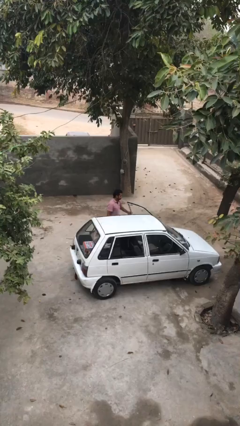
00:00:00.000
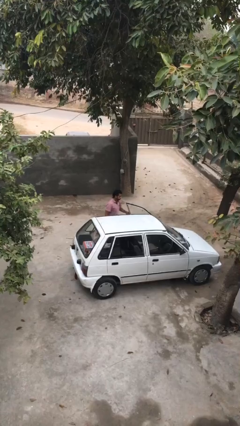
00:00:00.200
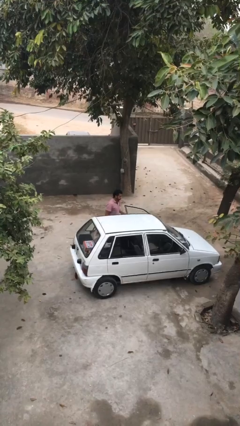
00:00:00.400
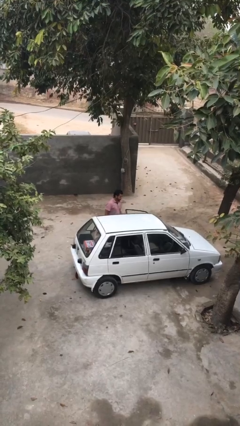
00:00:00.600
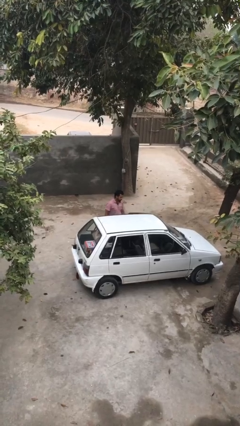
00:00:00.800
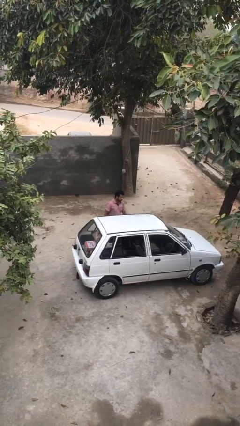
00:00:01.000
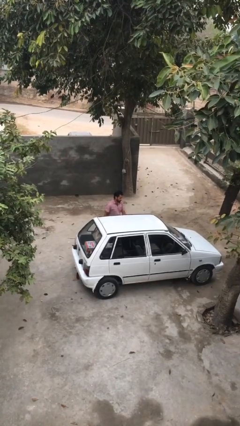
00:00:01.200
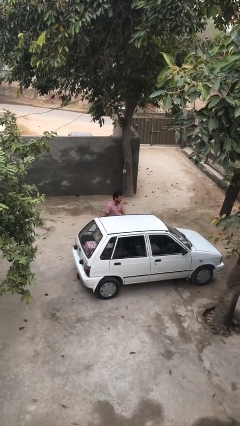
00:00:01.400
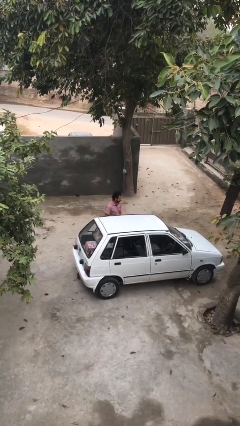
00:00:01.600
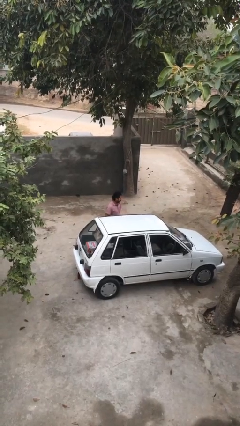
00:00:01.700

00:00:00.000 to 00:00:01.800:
person closes car door

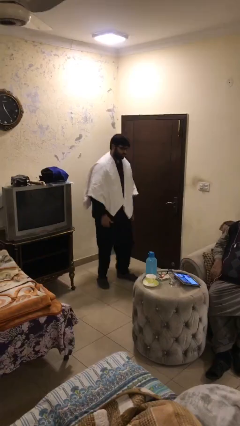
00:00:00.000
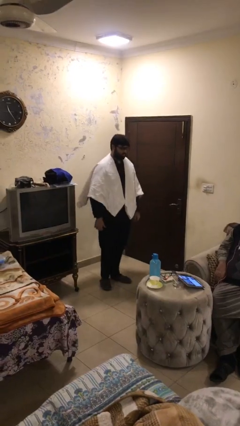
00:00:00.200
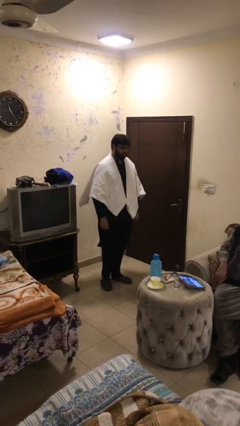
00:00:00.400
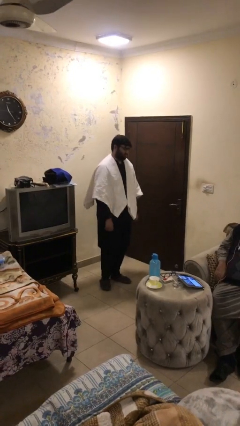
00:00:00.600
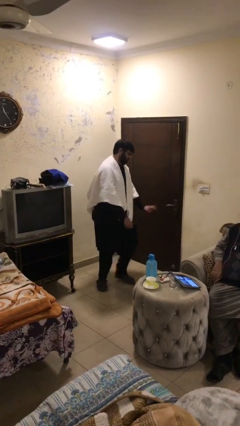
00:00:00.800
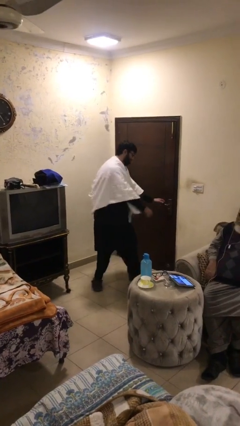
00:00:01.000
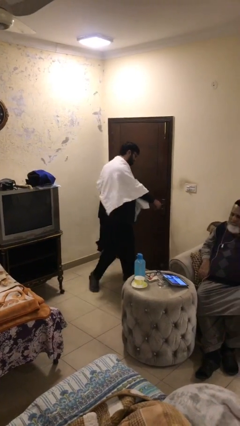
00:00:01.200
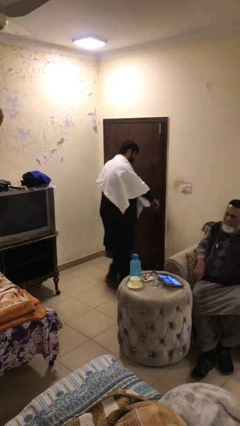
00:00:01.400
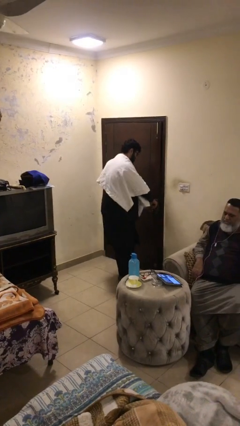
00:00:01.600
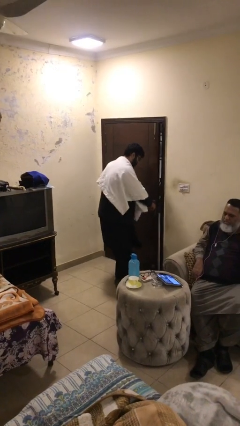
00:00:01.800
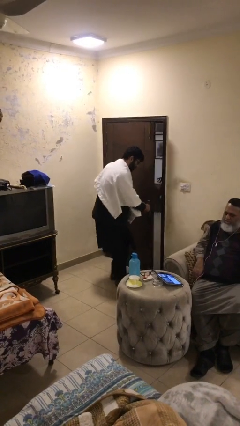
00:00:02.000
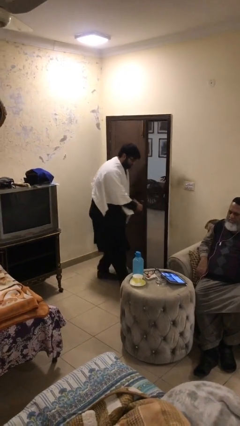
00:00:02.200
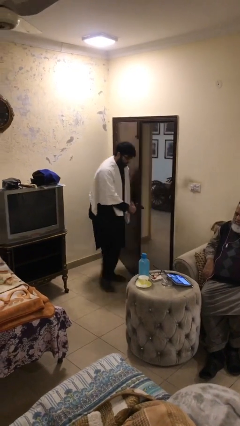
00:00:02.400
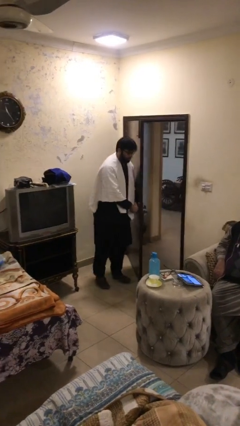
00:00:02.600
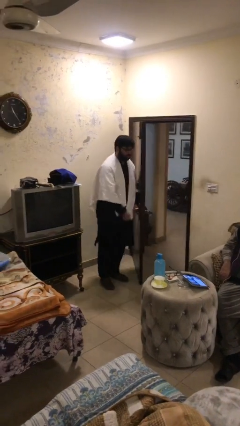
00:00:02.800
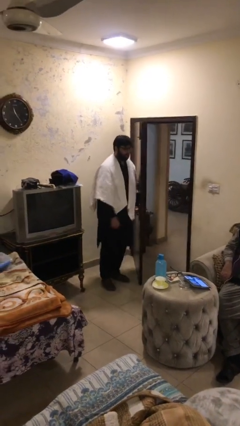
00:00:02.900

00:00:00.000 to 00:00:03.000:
person opens facility door

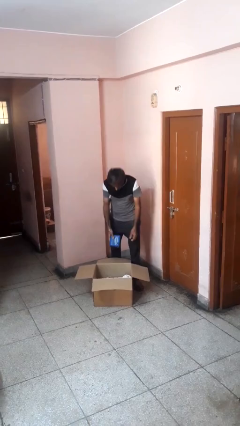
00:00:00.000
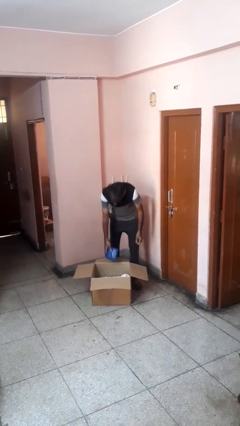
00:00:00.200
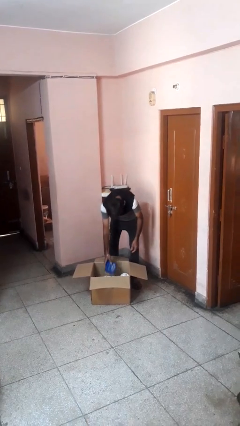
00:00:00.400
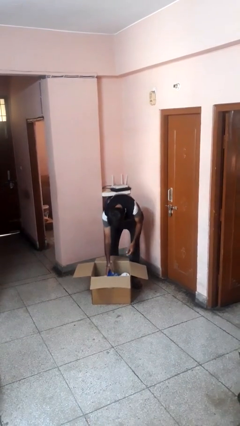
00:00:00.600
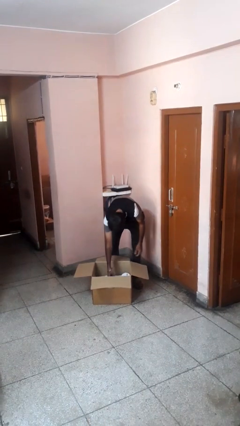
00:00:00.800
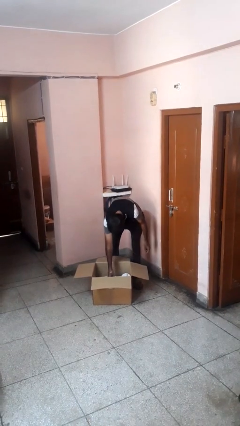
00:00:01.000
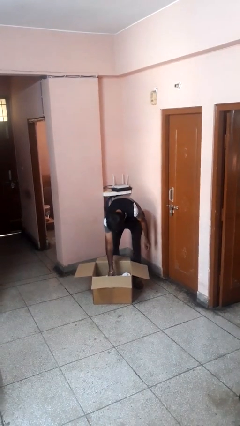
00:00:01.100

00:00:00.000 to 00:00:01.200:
person puts object into box

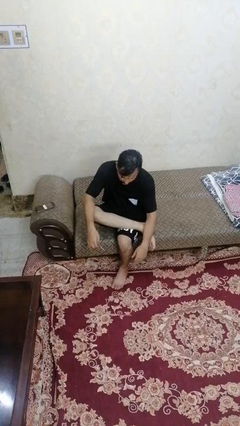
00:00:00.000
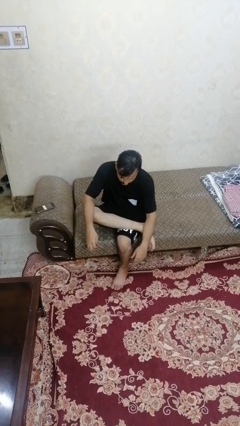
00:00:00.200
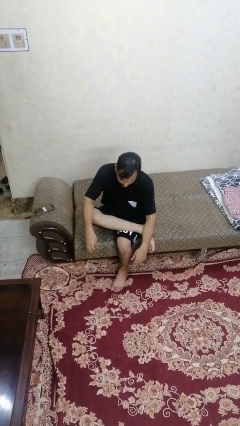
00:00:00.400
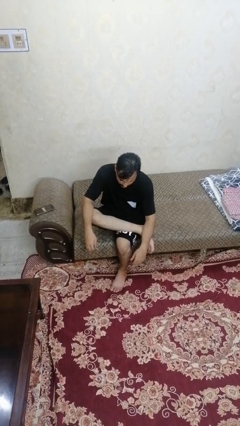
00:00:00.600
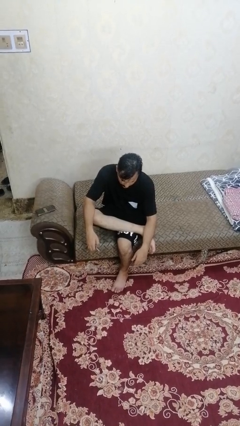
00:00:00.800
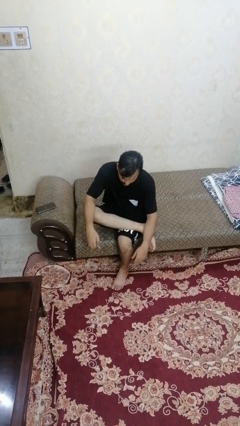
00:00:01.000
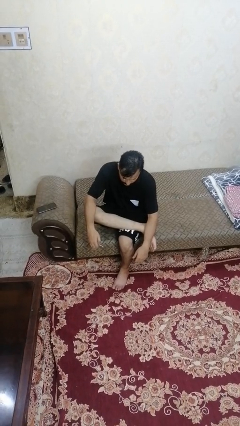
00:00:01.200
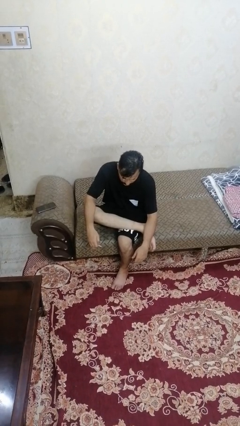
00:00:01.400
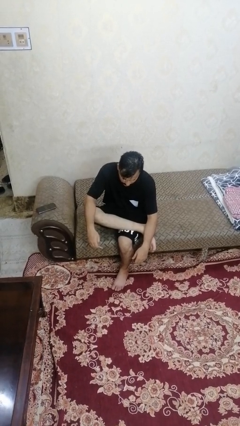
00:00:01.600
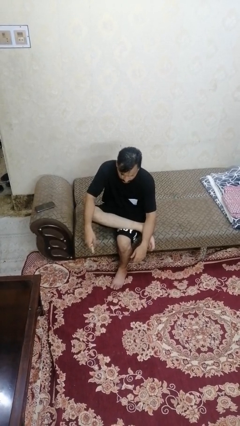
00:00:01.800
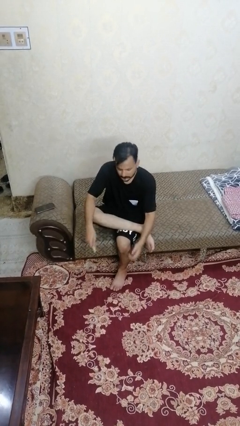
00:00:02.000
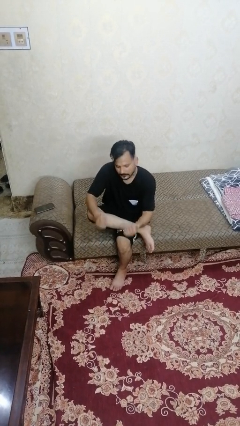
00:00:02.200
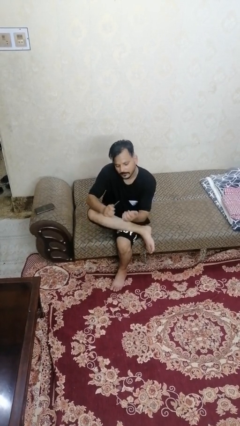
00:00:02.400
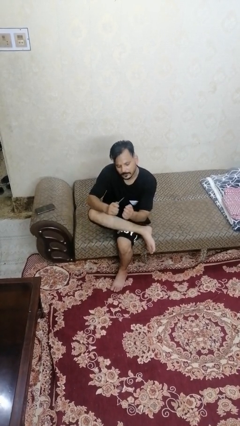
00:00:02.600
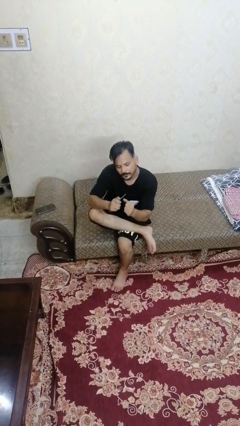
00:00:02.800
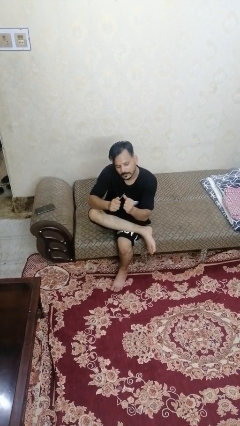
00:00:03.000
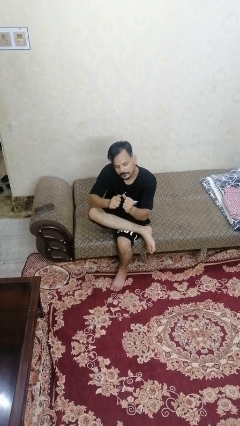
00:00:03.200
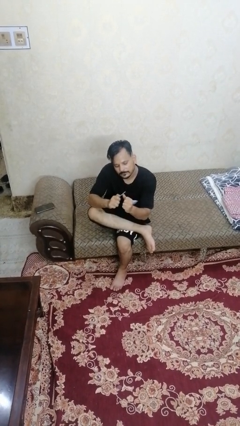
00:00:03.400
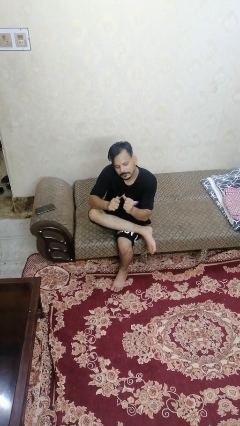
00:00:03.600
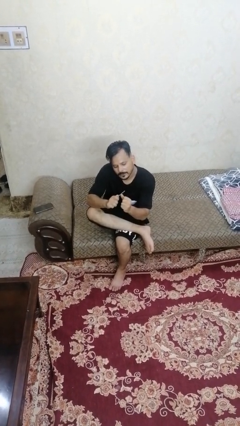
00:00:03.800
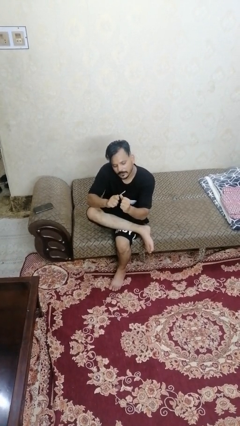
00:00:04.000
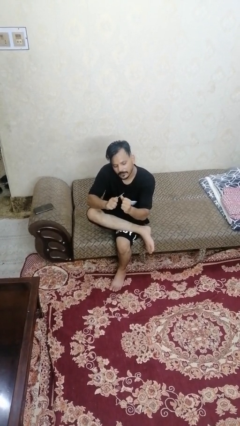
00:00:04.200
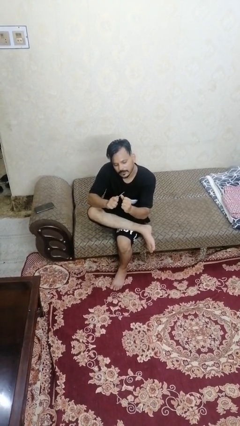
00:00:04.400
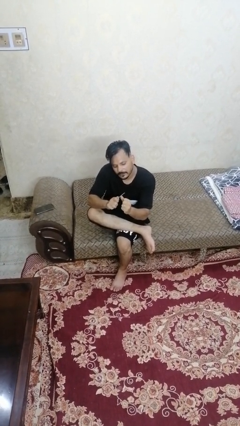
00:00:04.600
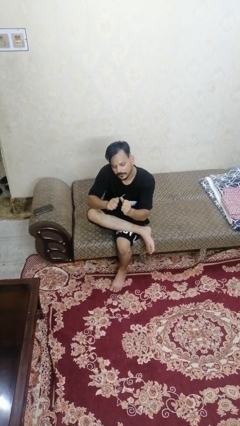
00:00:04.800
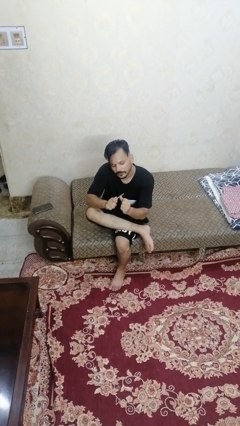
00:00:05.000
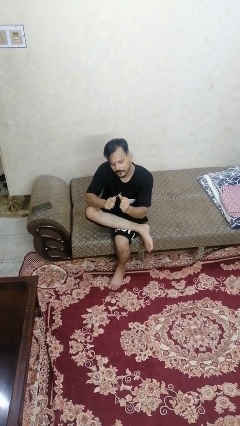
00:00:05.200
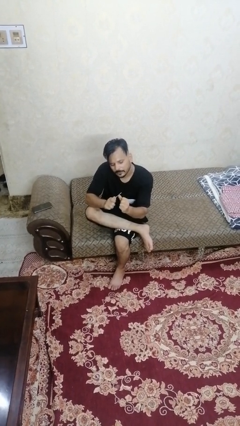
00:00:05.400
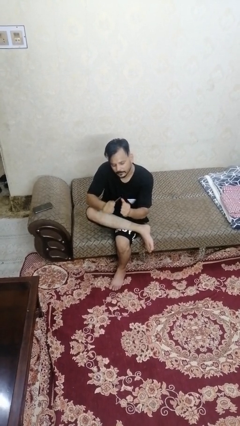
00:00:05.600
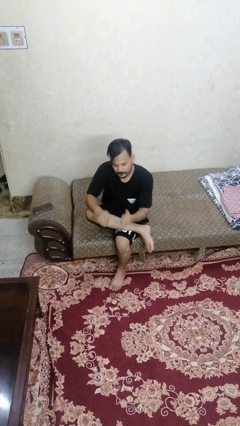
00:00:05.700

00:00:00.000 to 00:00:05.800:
person files fingernails

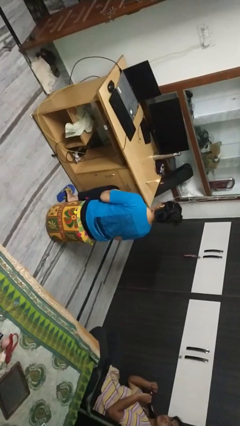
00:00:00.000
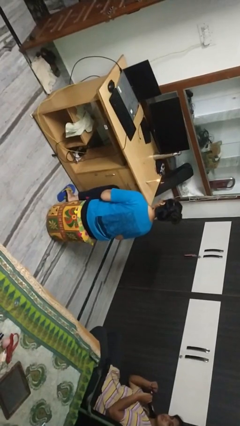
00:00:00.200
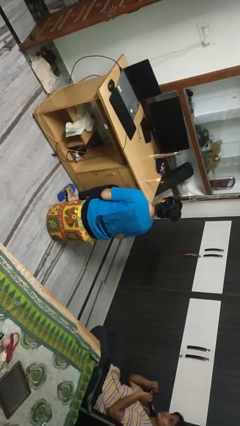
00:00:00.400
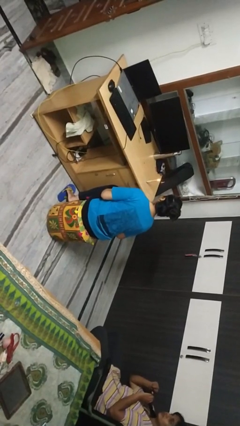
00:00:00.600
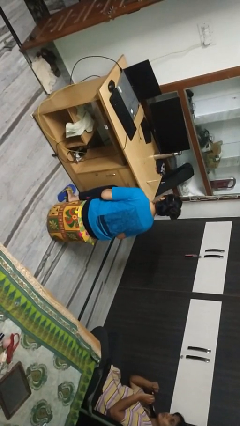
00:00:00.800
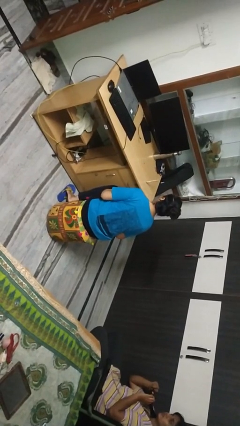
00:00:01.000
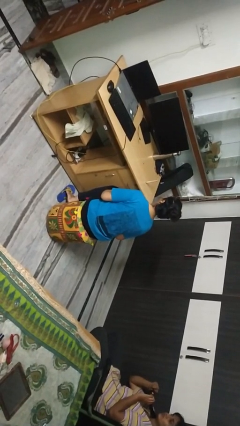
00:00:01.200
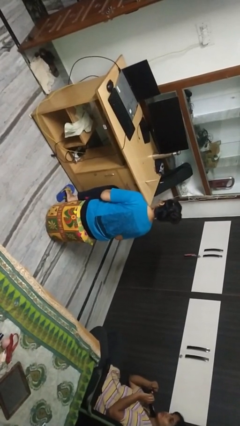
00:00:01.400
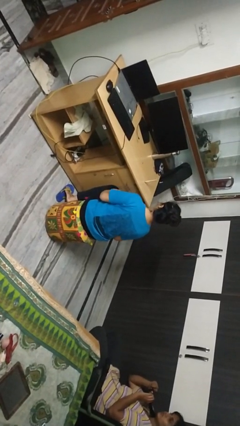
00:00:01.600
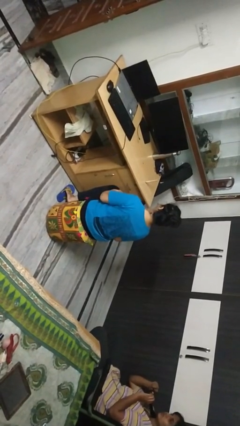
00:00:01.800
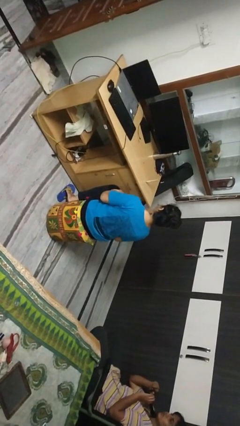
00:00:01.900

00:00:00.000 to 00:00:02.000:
person extinguishes candle

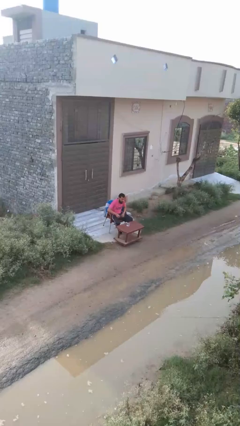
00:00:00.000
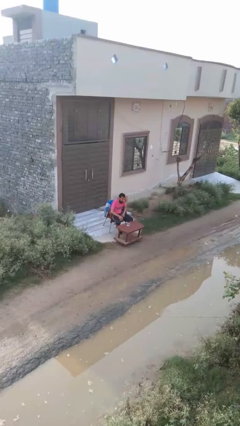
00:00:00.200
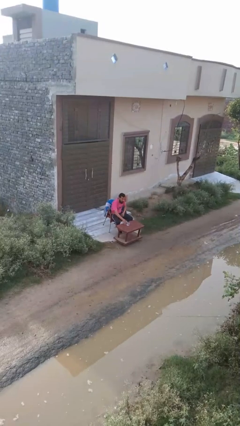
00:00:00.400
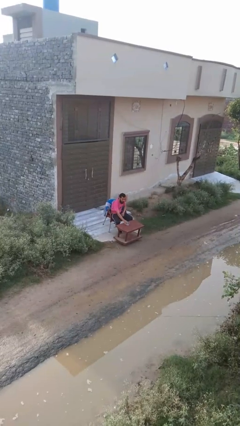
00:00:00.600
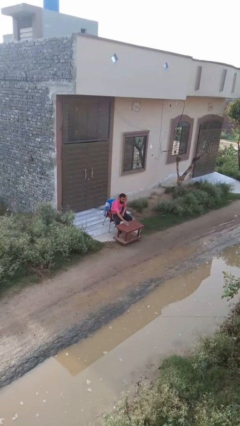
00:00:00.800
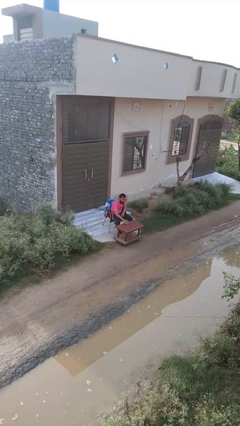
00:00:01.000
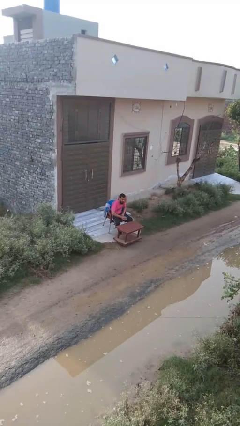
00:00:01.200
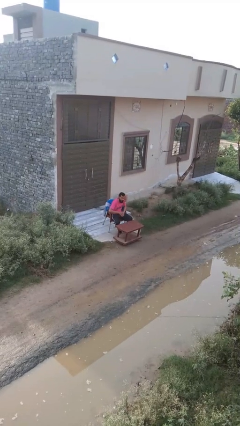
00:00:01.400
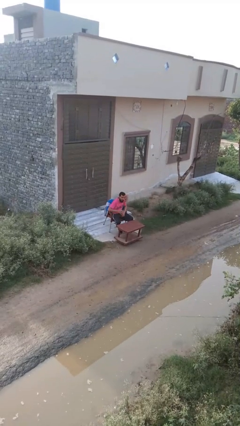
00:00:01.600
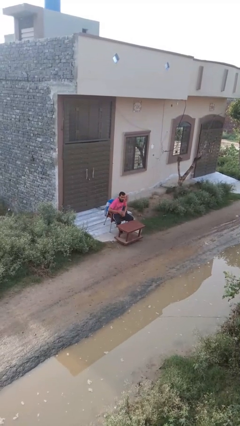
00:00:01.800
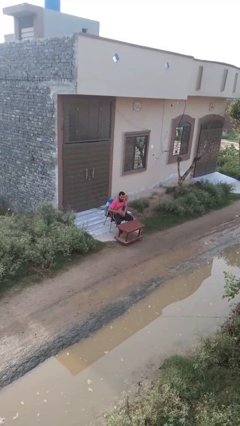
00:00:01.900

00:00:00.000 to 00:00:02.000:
person picks up object from table

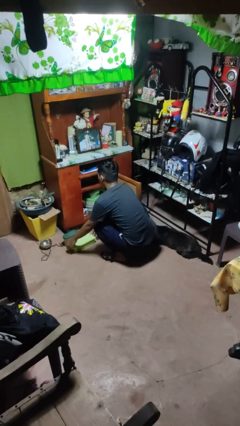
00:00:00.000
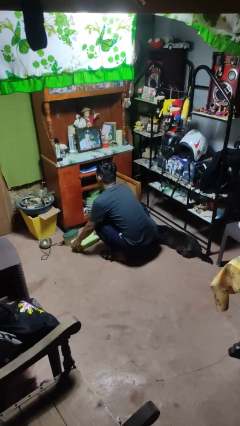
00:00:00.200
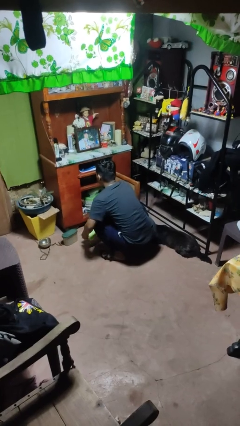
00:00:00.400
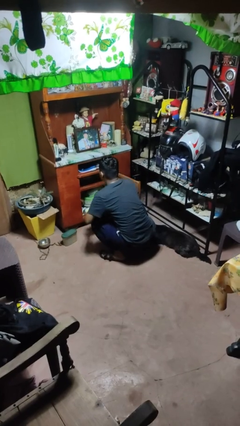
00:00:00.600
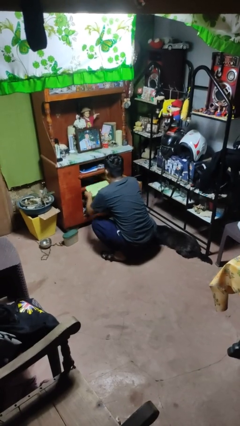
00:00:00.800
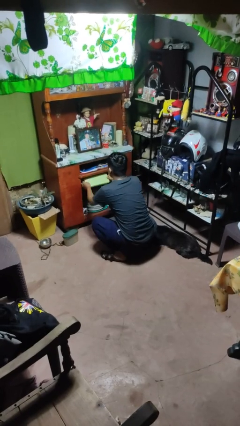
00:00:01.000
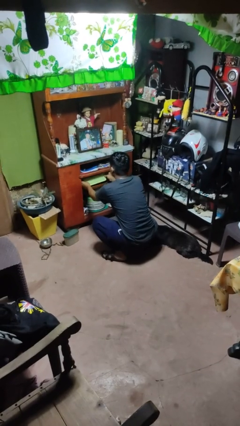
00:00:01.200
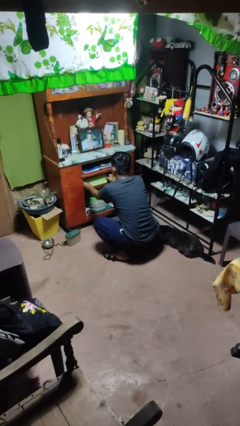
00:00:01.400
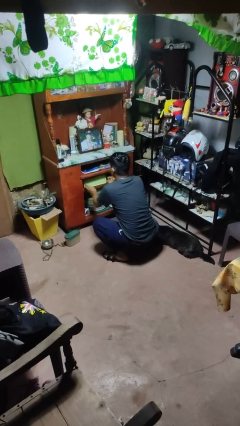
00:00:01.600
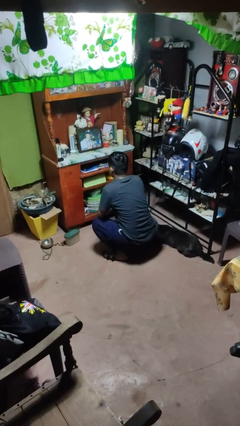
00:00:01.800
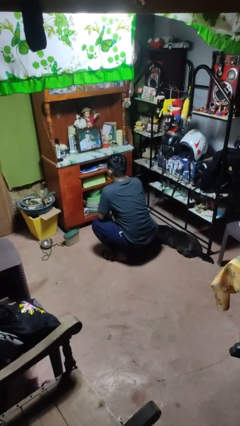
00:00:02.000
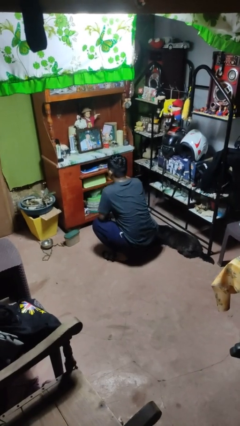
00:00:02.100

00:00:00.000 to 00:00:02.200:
person puts object in cabinet
